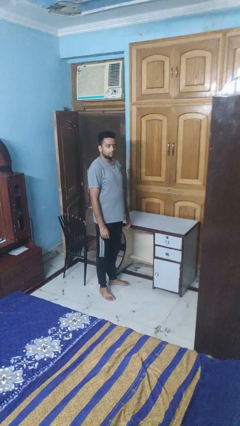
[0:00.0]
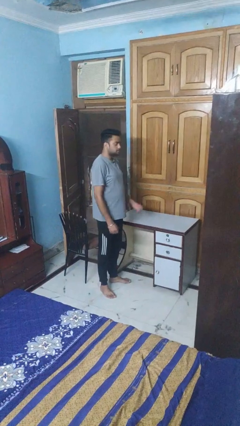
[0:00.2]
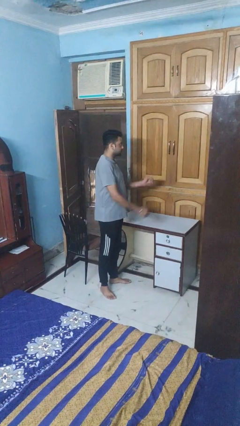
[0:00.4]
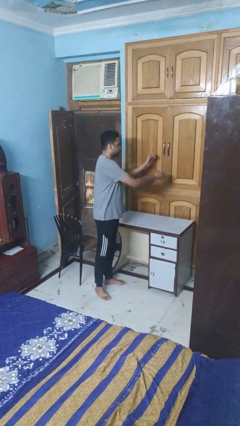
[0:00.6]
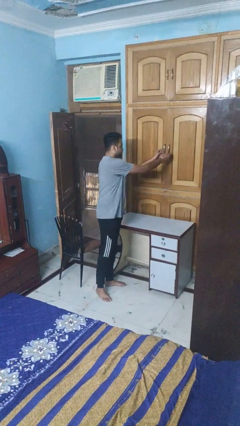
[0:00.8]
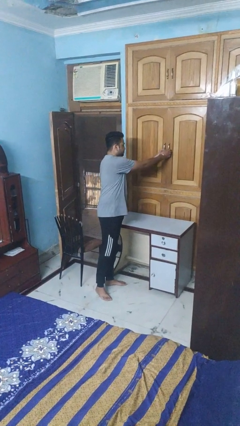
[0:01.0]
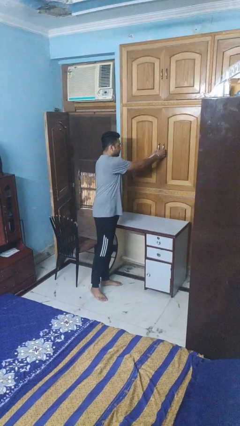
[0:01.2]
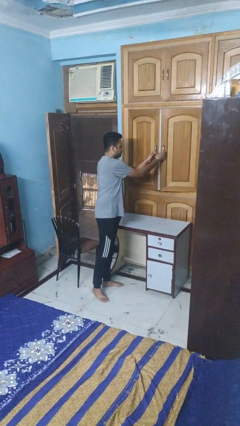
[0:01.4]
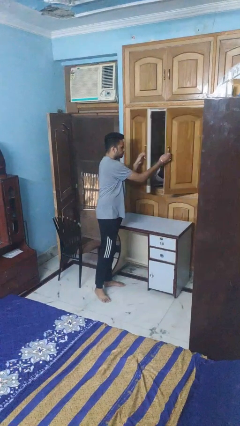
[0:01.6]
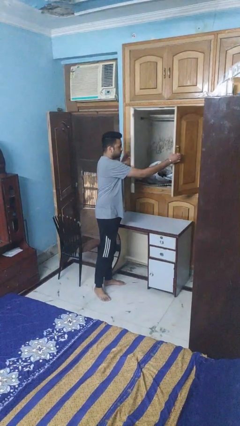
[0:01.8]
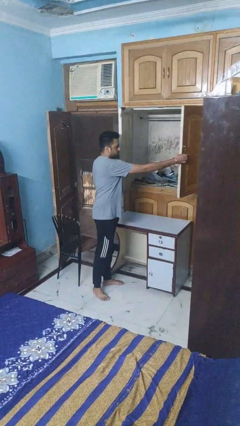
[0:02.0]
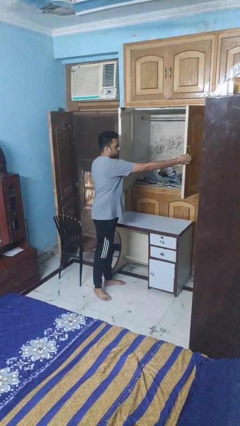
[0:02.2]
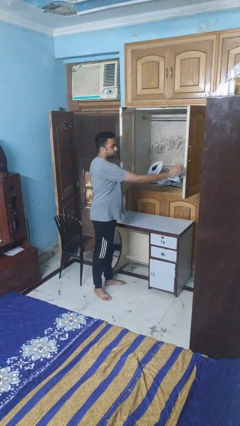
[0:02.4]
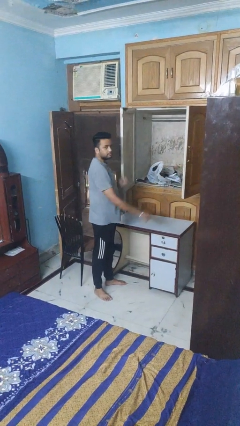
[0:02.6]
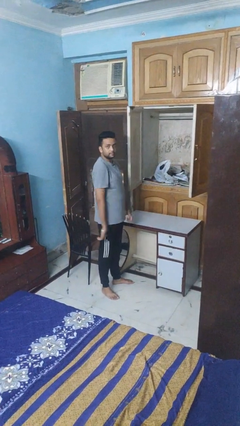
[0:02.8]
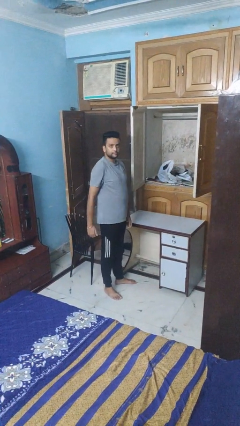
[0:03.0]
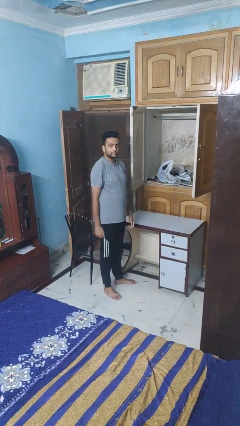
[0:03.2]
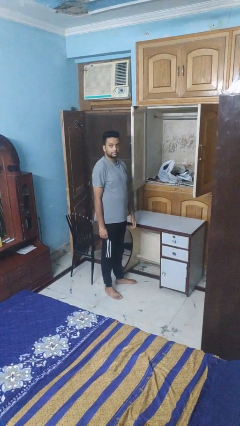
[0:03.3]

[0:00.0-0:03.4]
person opens closet door

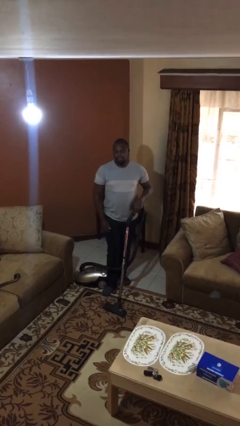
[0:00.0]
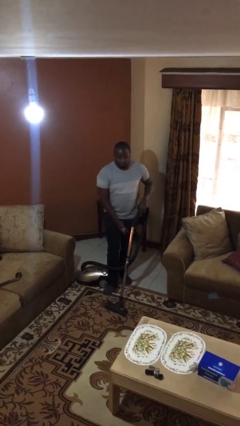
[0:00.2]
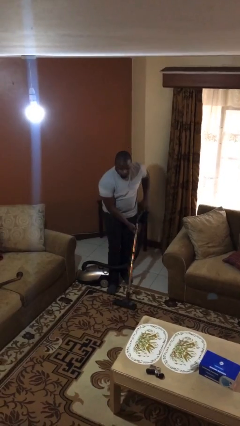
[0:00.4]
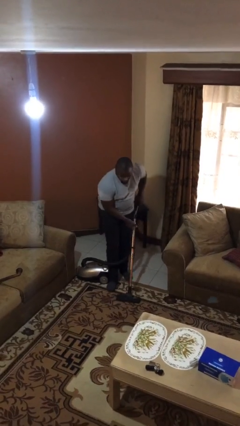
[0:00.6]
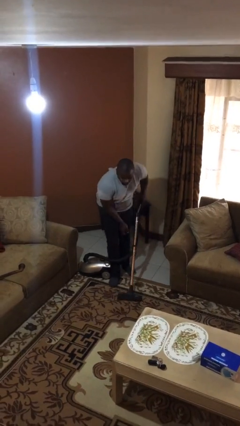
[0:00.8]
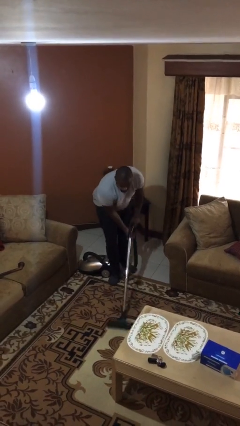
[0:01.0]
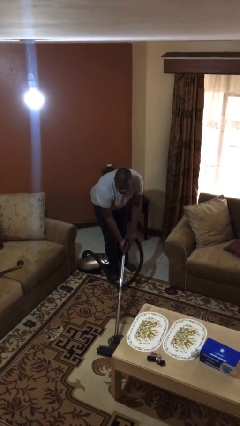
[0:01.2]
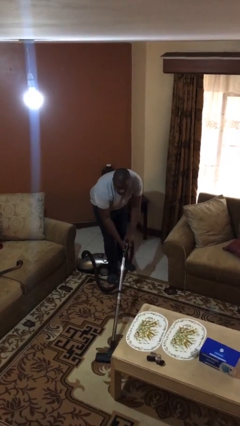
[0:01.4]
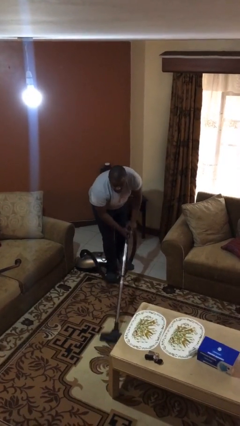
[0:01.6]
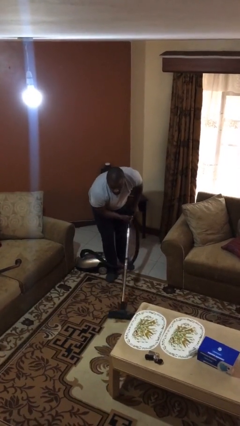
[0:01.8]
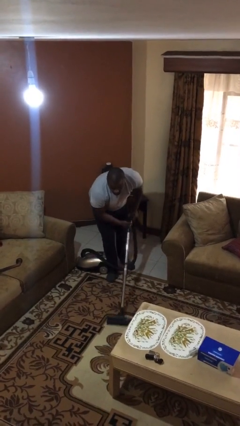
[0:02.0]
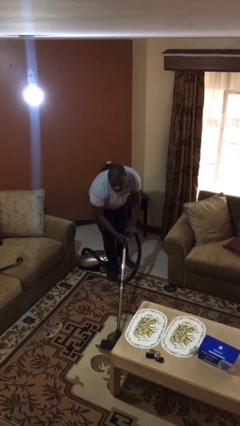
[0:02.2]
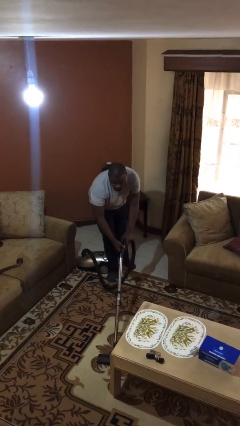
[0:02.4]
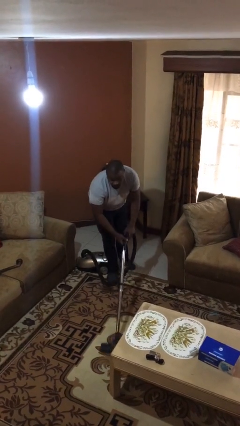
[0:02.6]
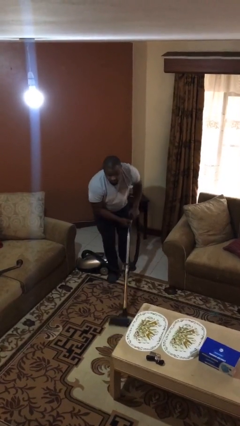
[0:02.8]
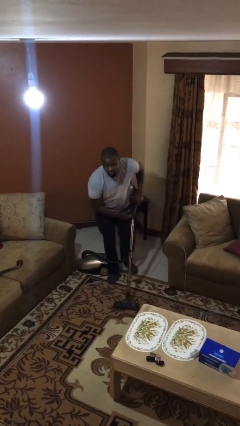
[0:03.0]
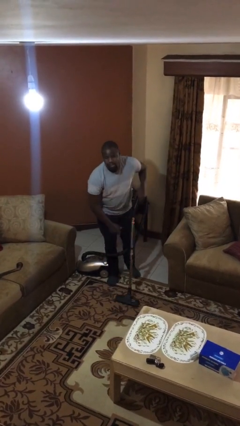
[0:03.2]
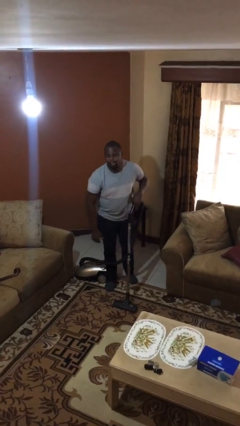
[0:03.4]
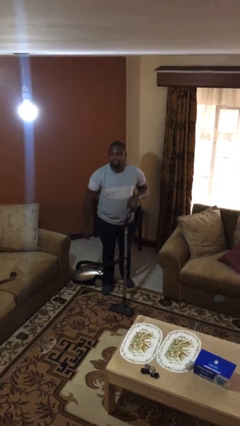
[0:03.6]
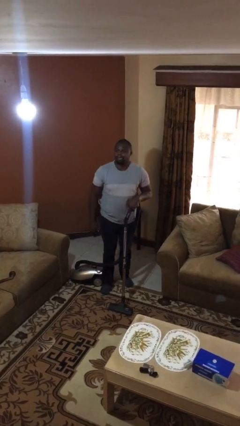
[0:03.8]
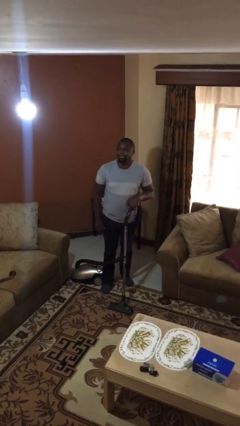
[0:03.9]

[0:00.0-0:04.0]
person vacuums carpet

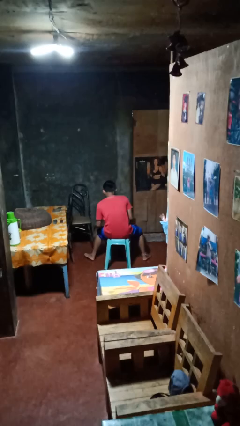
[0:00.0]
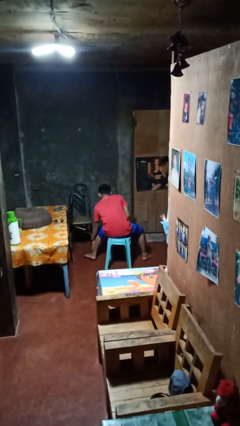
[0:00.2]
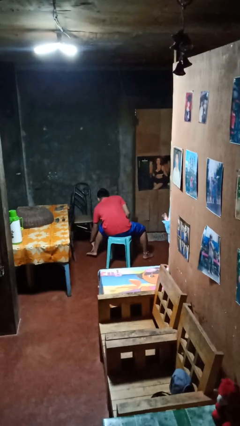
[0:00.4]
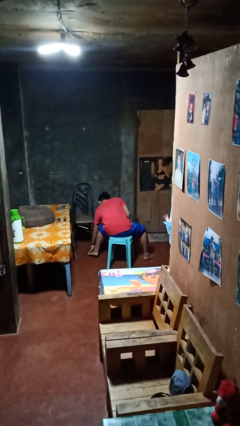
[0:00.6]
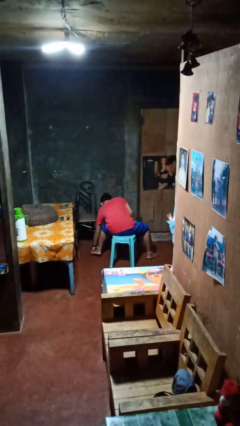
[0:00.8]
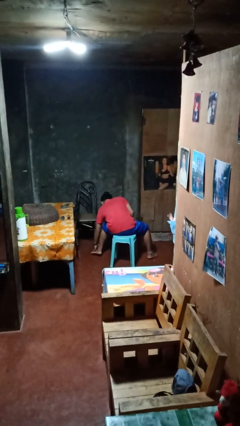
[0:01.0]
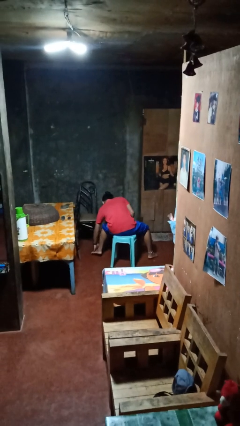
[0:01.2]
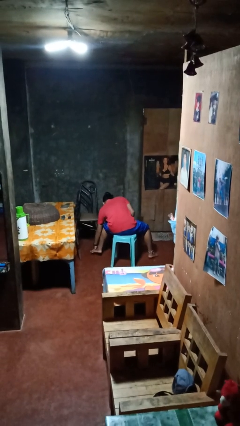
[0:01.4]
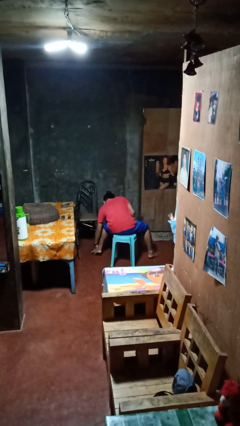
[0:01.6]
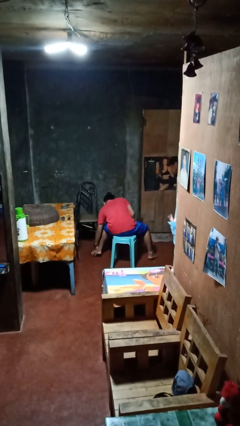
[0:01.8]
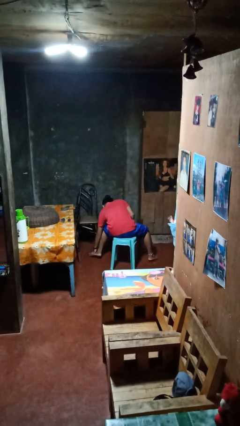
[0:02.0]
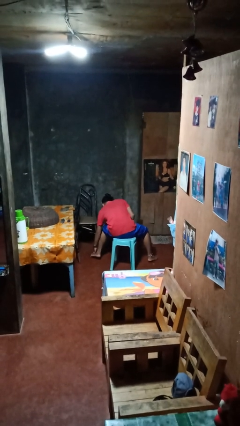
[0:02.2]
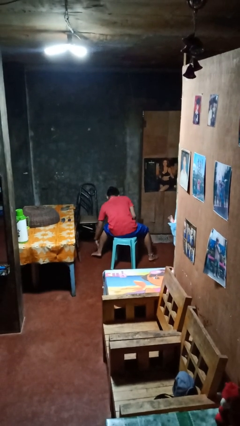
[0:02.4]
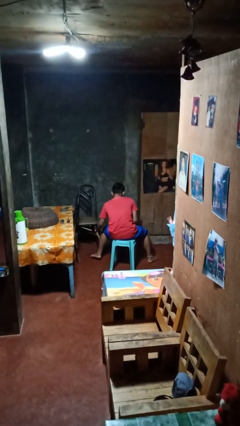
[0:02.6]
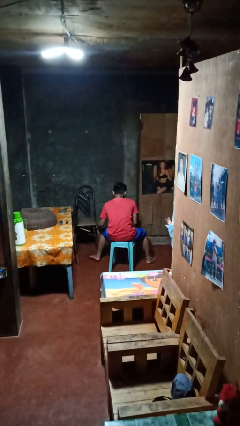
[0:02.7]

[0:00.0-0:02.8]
person rubs foot

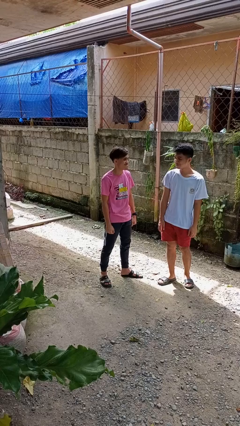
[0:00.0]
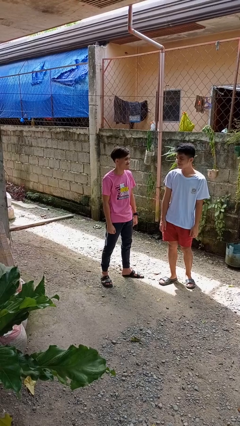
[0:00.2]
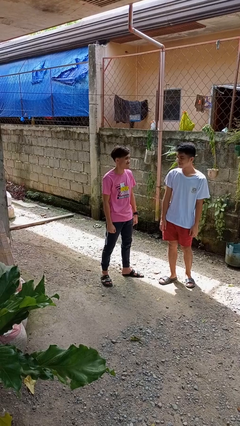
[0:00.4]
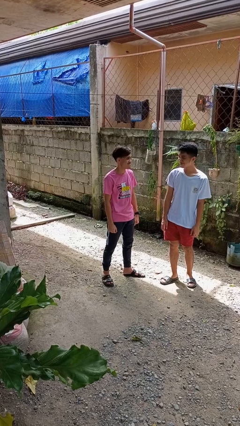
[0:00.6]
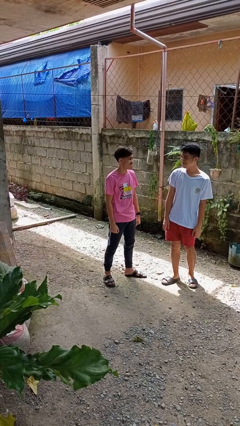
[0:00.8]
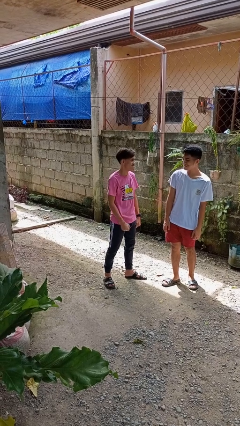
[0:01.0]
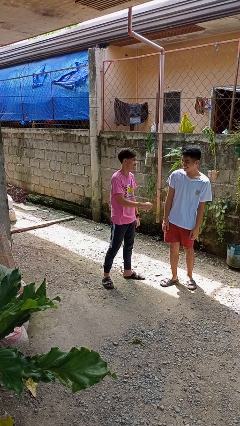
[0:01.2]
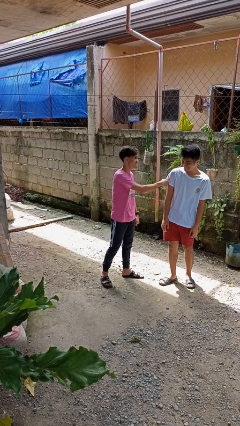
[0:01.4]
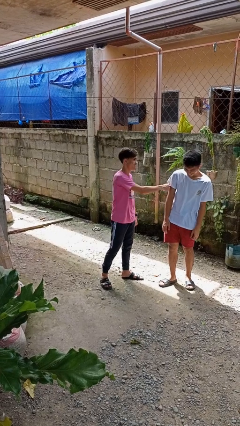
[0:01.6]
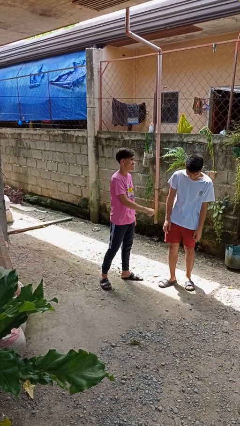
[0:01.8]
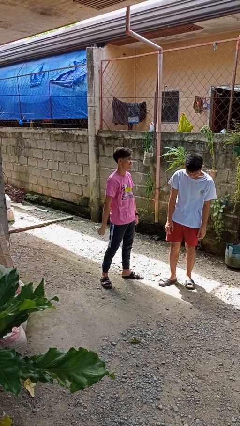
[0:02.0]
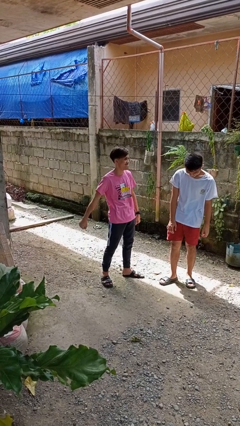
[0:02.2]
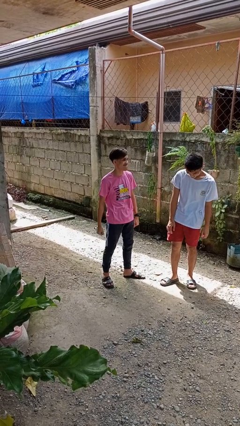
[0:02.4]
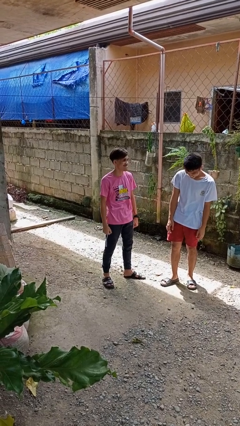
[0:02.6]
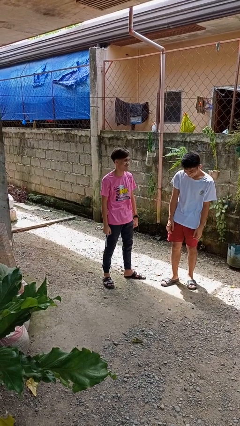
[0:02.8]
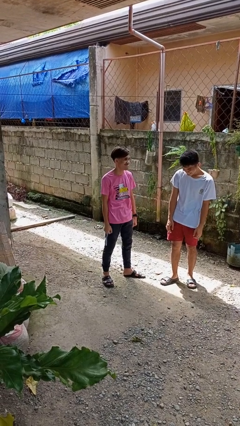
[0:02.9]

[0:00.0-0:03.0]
person pounds shoulders of person

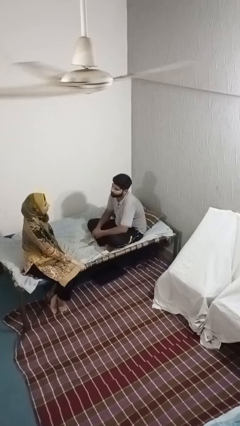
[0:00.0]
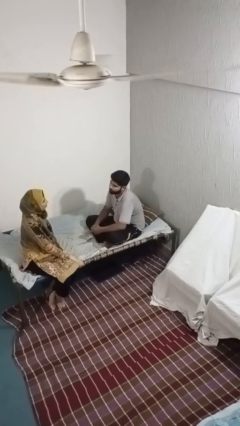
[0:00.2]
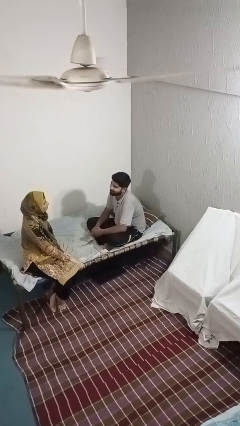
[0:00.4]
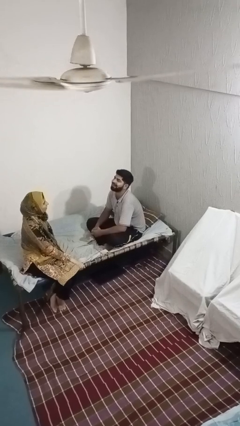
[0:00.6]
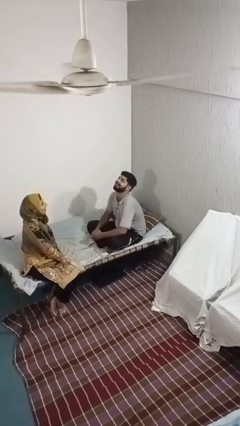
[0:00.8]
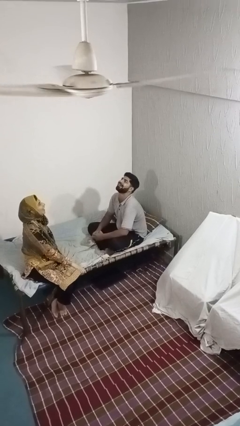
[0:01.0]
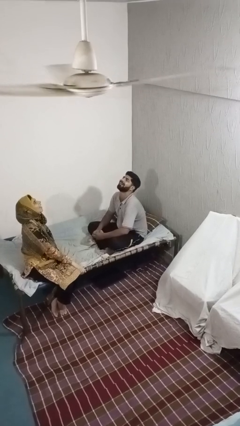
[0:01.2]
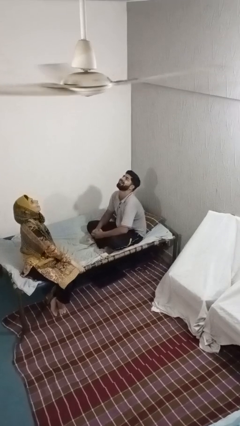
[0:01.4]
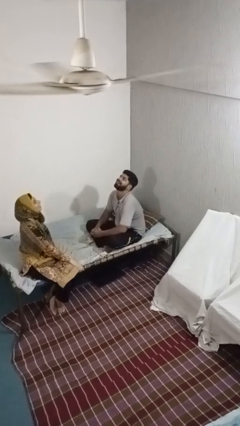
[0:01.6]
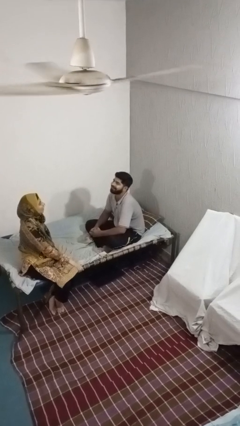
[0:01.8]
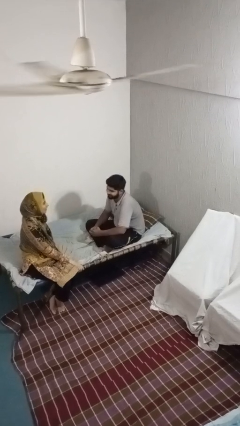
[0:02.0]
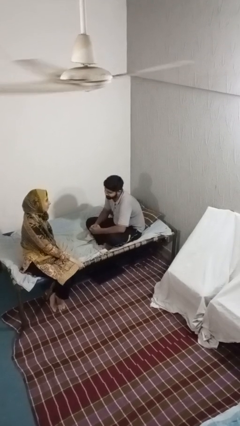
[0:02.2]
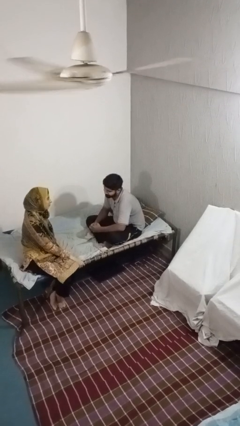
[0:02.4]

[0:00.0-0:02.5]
person laughs with person

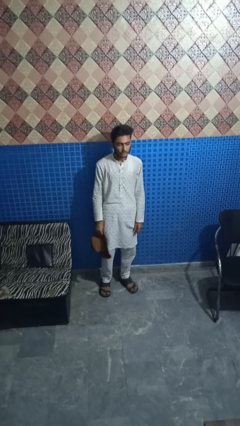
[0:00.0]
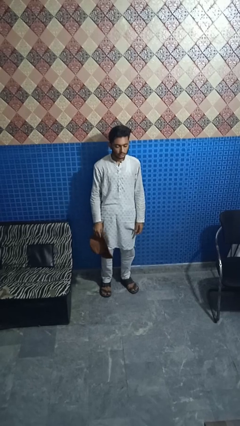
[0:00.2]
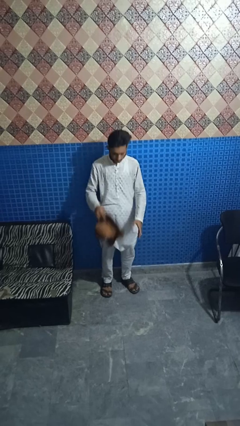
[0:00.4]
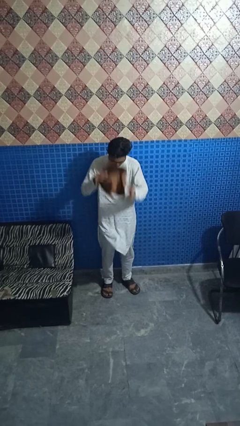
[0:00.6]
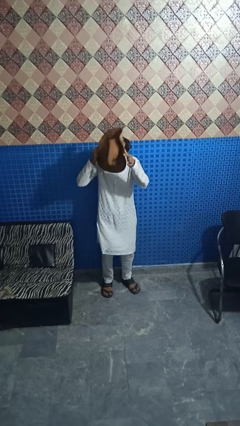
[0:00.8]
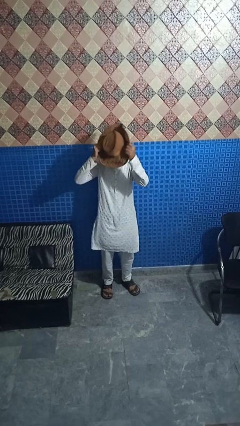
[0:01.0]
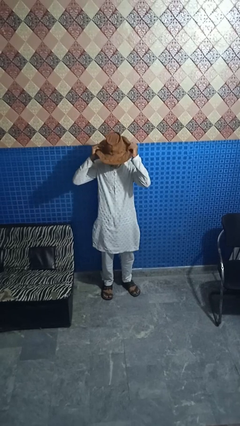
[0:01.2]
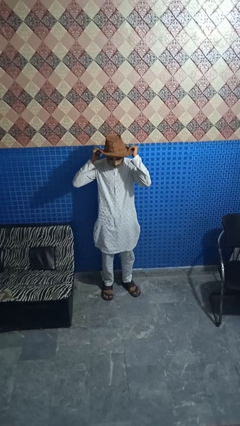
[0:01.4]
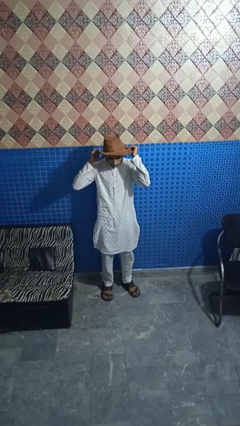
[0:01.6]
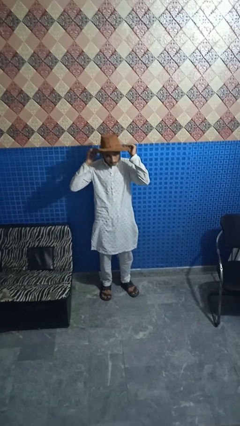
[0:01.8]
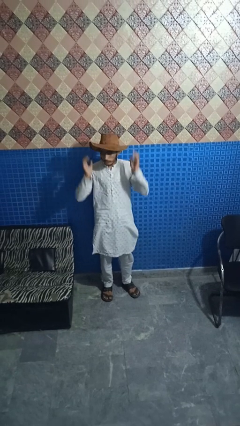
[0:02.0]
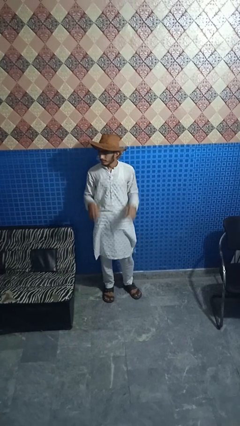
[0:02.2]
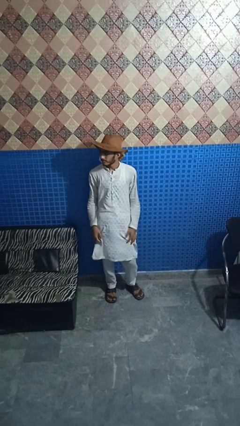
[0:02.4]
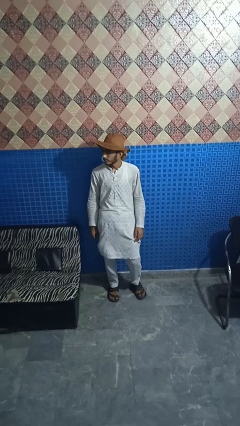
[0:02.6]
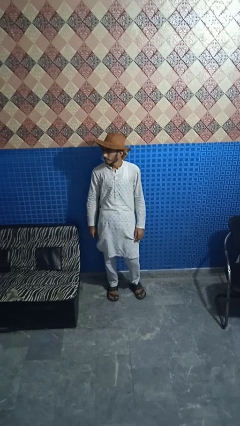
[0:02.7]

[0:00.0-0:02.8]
person puts on hat
